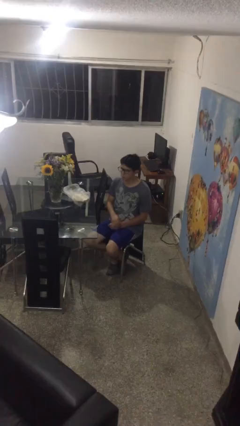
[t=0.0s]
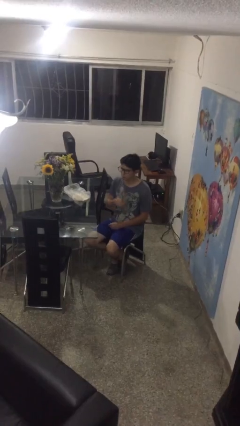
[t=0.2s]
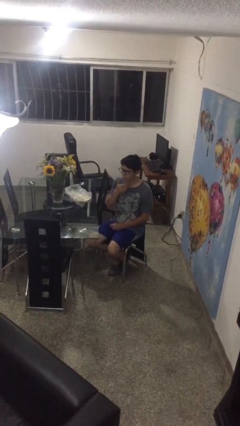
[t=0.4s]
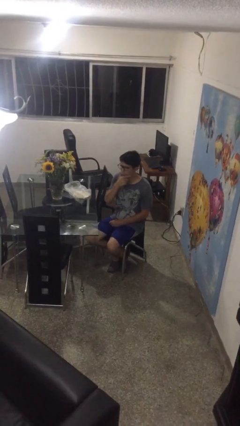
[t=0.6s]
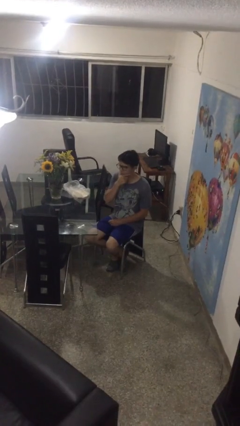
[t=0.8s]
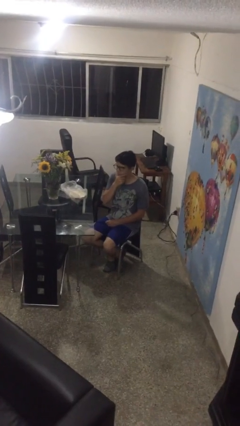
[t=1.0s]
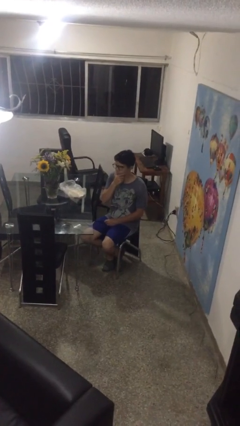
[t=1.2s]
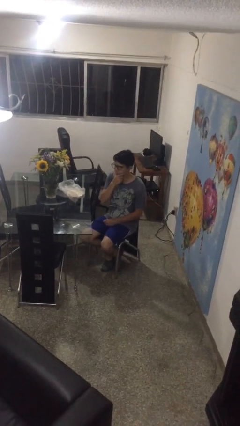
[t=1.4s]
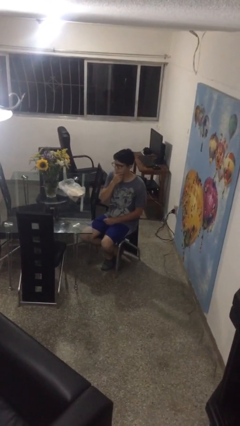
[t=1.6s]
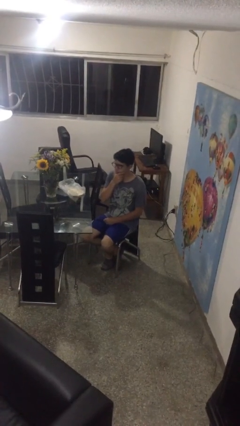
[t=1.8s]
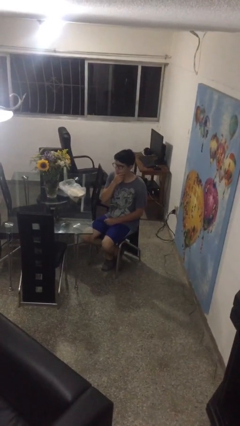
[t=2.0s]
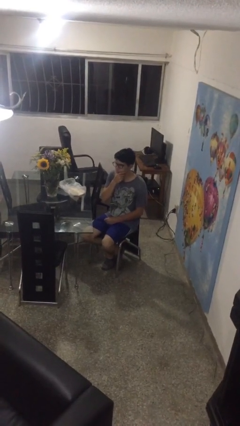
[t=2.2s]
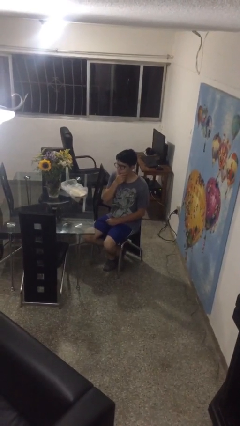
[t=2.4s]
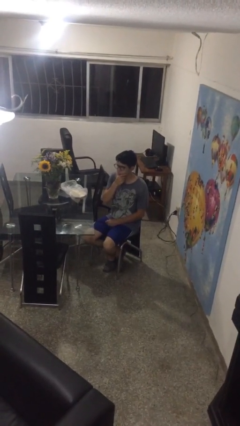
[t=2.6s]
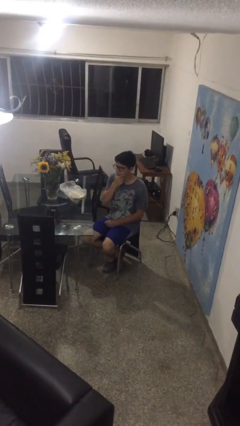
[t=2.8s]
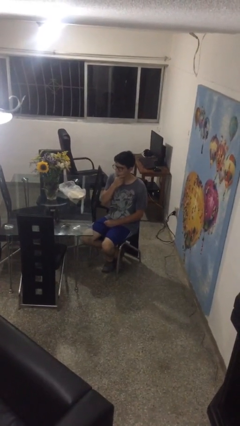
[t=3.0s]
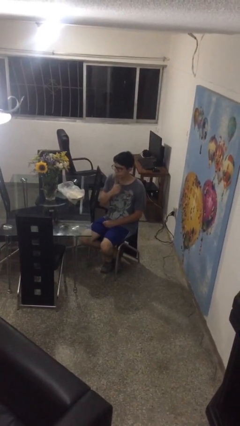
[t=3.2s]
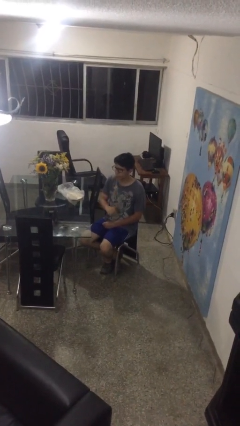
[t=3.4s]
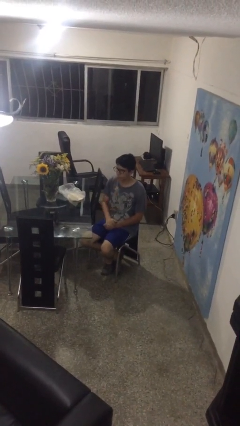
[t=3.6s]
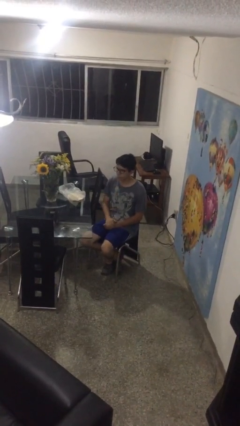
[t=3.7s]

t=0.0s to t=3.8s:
person strokes chin

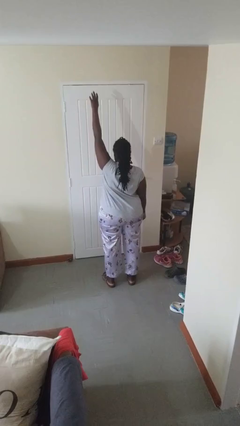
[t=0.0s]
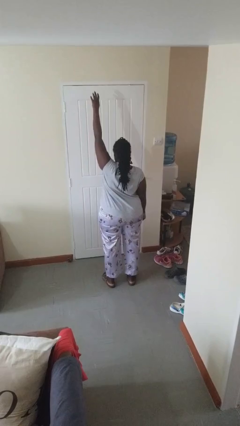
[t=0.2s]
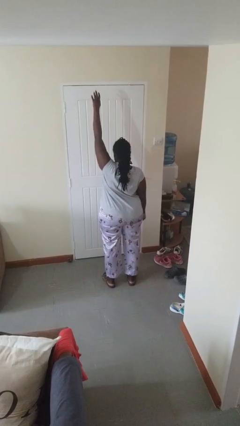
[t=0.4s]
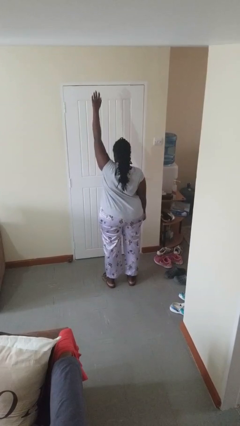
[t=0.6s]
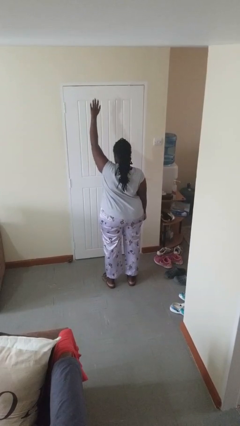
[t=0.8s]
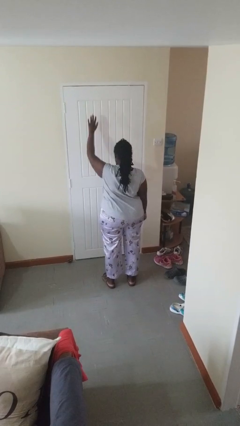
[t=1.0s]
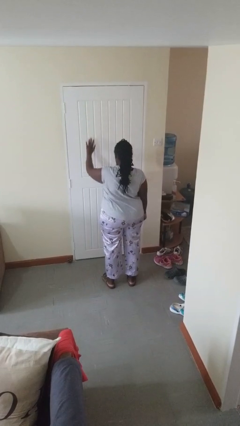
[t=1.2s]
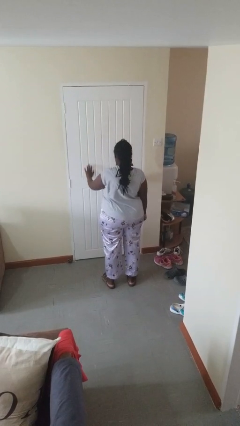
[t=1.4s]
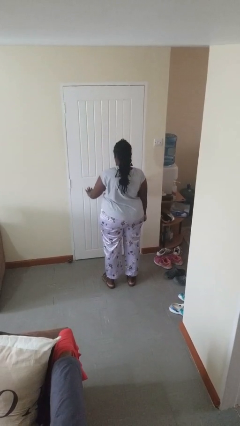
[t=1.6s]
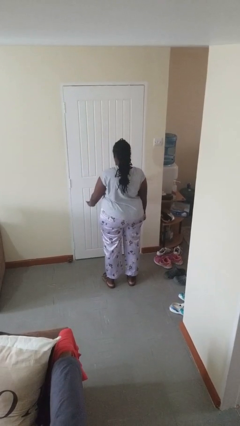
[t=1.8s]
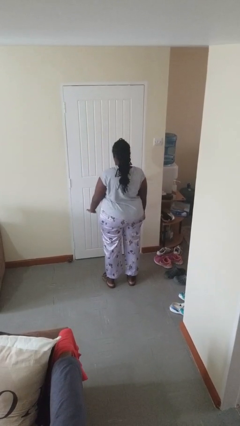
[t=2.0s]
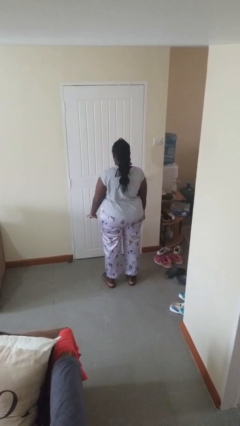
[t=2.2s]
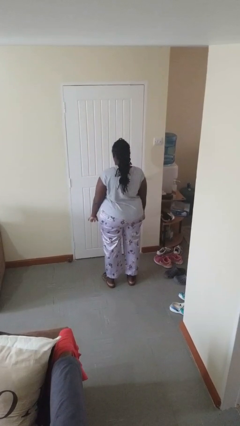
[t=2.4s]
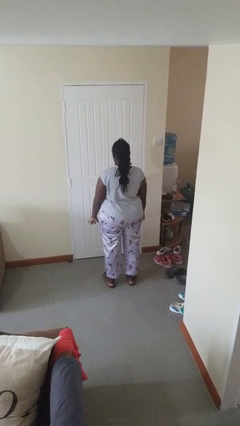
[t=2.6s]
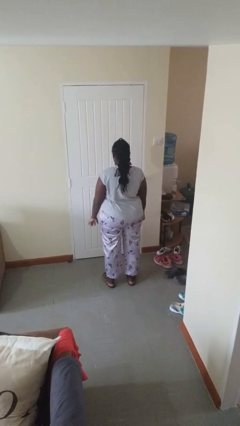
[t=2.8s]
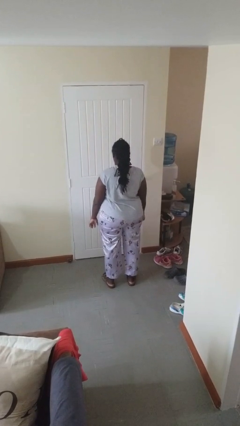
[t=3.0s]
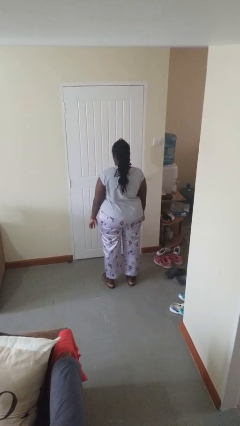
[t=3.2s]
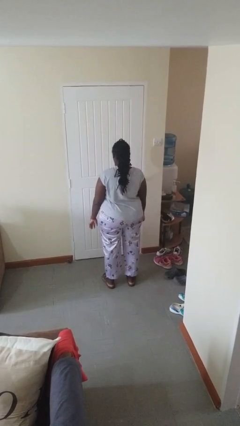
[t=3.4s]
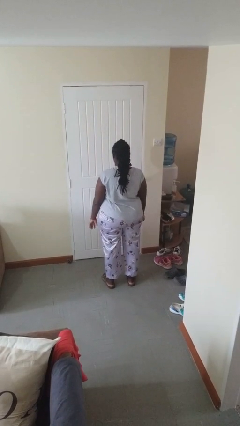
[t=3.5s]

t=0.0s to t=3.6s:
person gestures swipe down

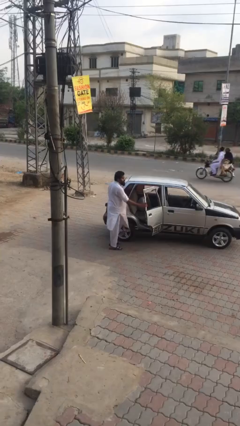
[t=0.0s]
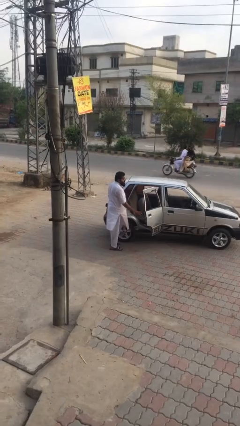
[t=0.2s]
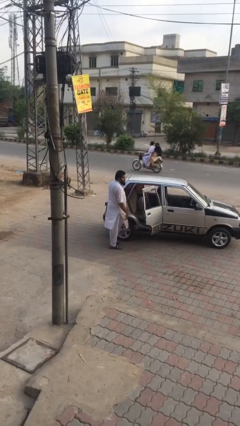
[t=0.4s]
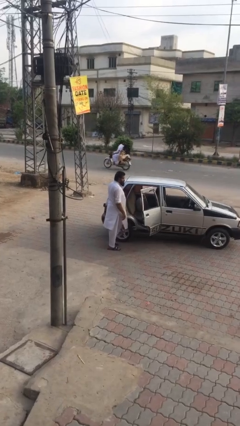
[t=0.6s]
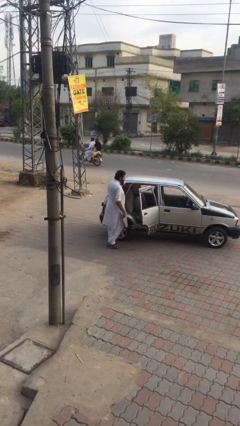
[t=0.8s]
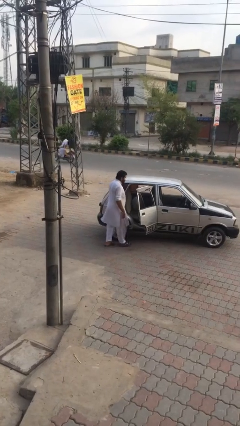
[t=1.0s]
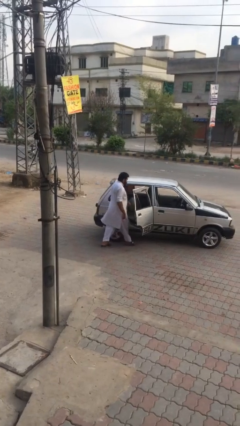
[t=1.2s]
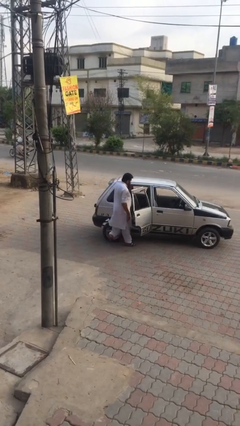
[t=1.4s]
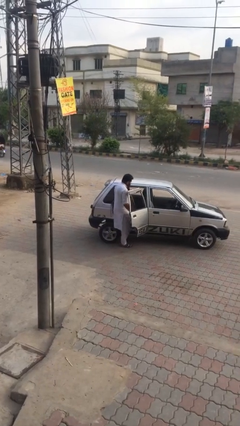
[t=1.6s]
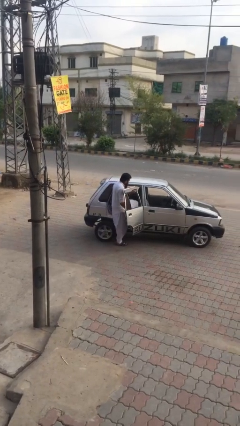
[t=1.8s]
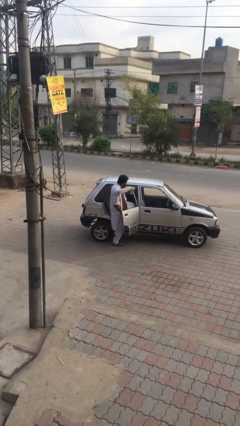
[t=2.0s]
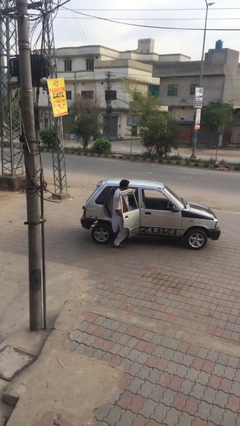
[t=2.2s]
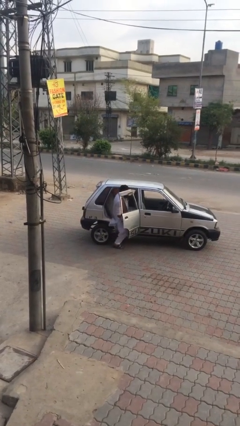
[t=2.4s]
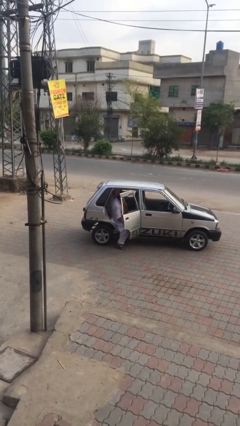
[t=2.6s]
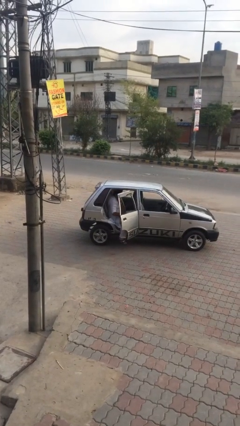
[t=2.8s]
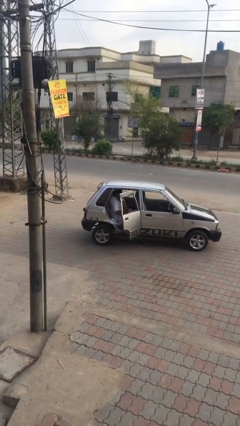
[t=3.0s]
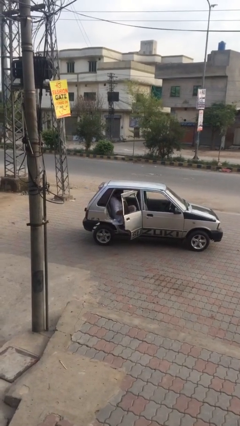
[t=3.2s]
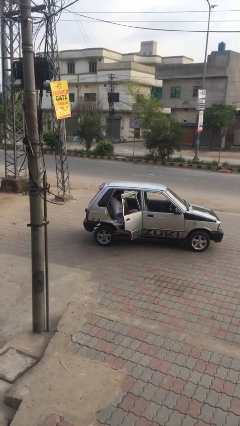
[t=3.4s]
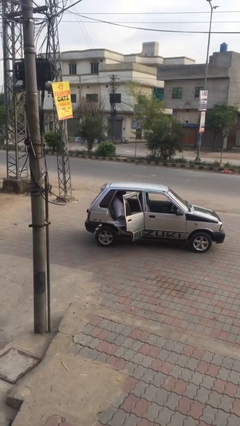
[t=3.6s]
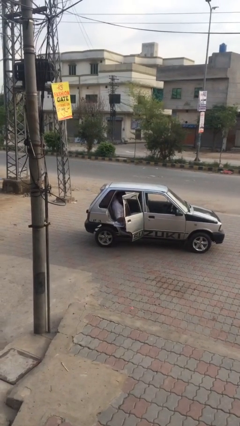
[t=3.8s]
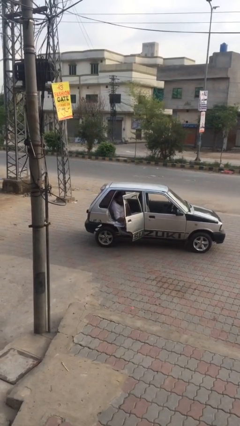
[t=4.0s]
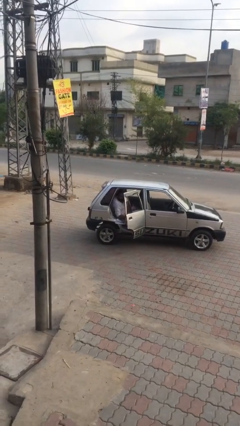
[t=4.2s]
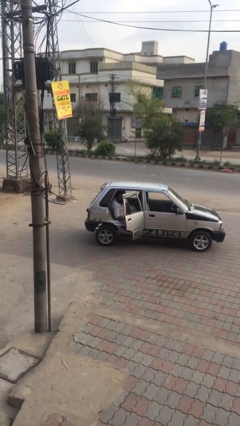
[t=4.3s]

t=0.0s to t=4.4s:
person enters car

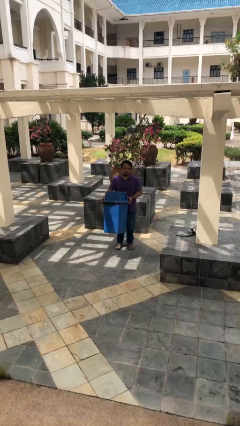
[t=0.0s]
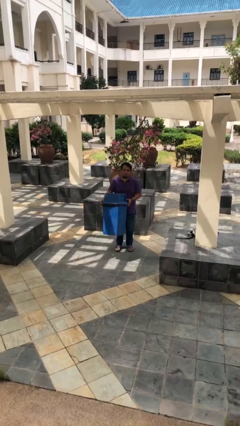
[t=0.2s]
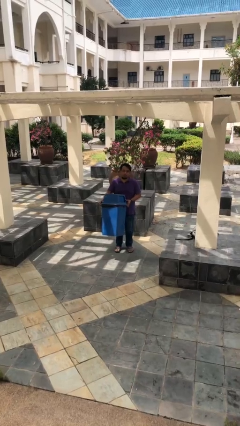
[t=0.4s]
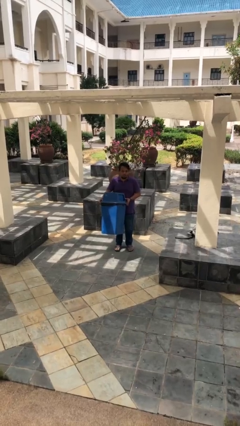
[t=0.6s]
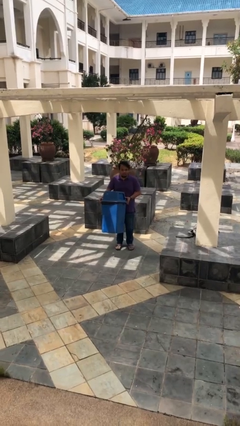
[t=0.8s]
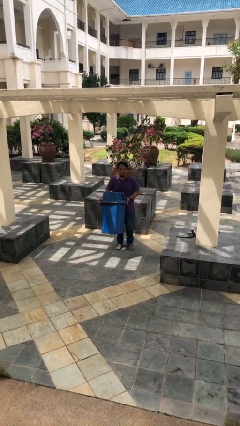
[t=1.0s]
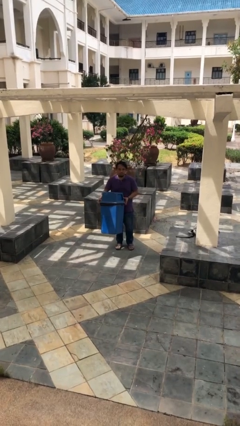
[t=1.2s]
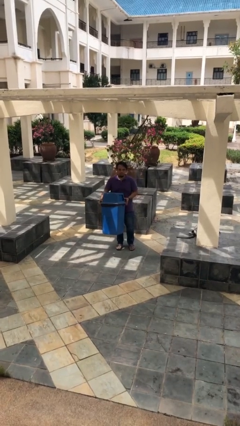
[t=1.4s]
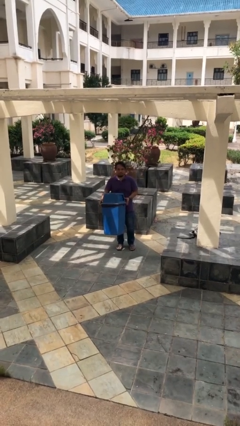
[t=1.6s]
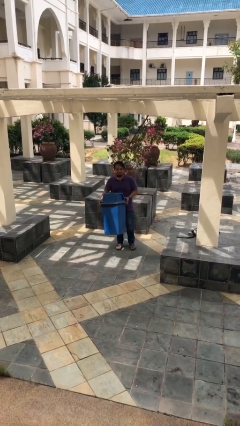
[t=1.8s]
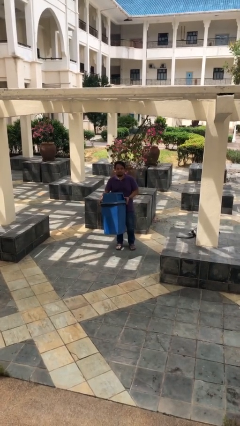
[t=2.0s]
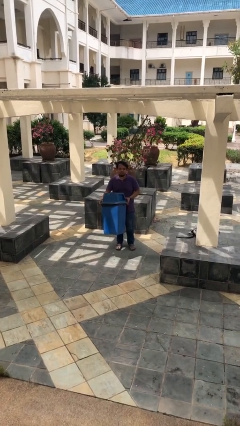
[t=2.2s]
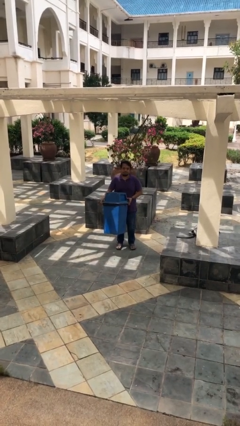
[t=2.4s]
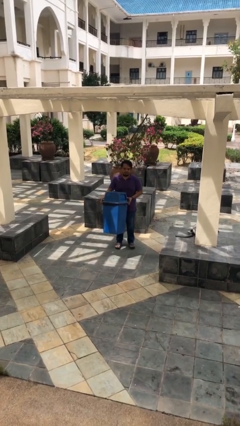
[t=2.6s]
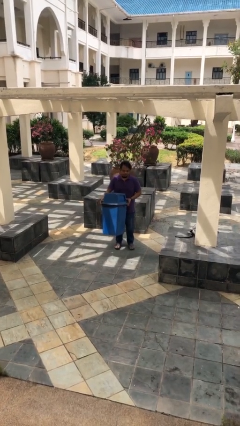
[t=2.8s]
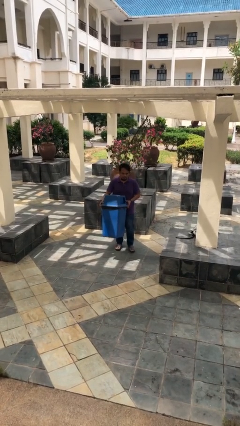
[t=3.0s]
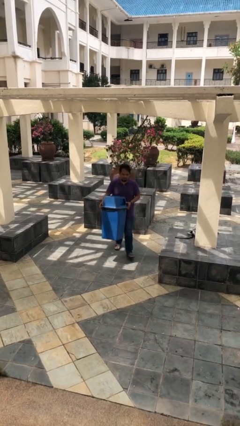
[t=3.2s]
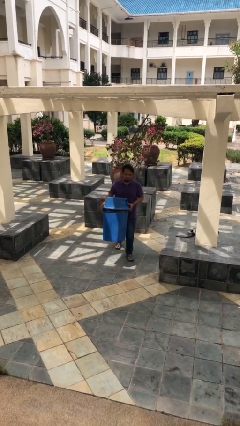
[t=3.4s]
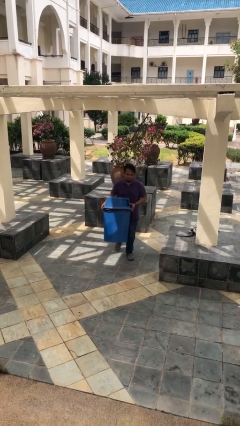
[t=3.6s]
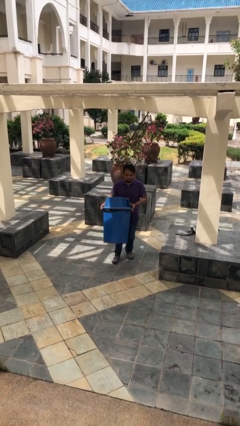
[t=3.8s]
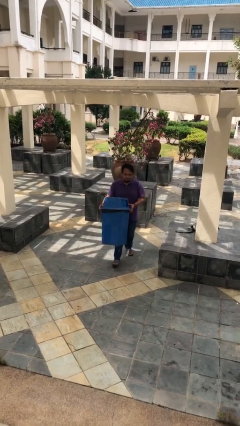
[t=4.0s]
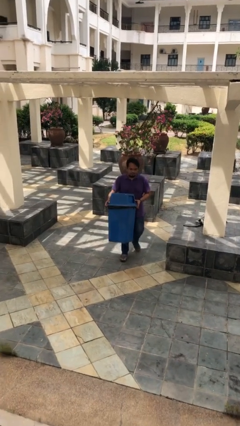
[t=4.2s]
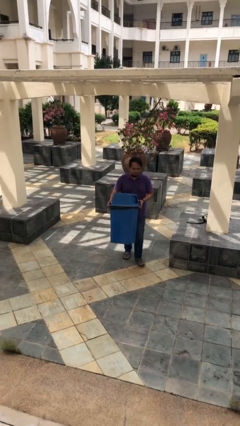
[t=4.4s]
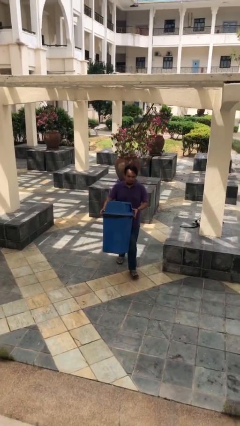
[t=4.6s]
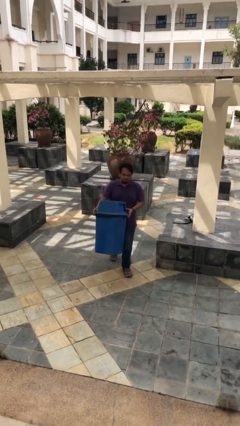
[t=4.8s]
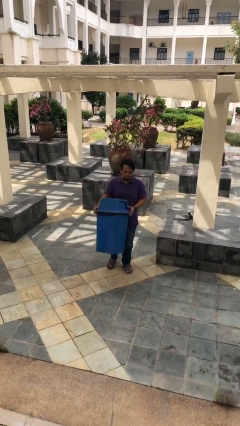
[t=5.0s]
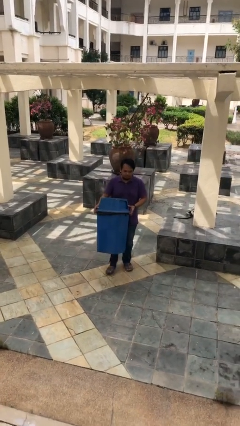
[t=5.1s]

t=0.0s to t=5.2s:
person carries heavy object

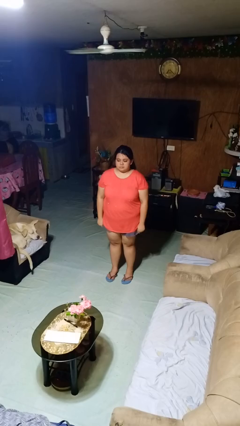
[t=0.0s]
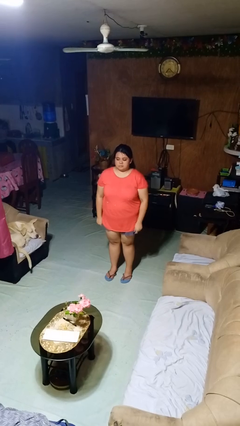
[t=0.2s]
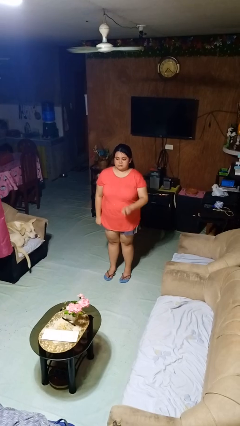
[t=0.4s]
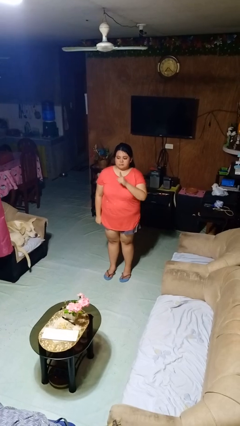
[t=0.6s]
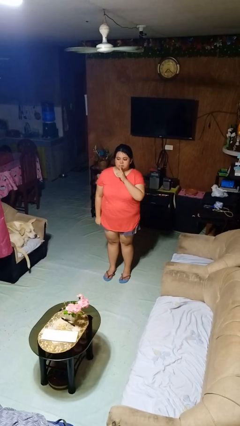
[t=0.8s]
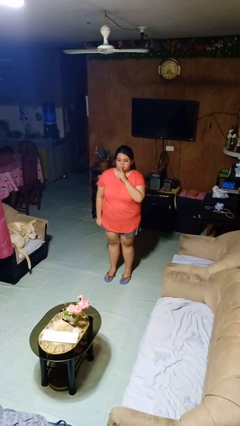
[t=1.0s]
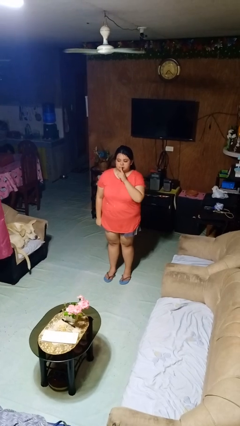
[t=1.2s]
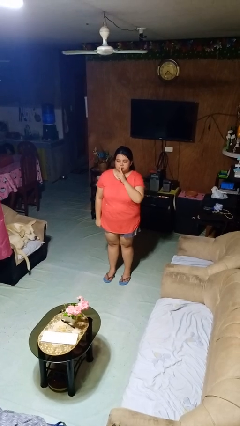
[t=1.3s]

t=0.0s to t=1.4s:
person gestures be quiet
